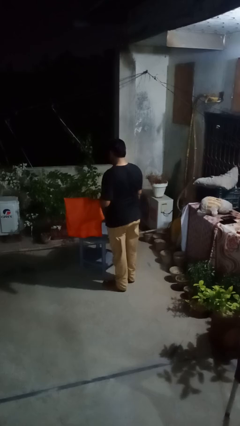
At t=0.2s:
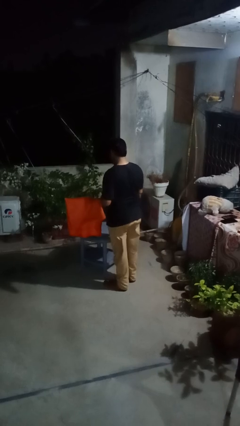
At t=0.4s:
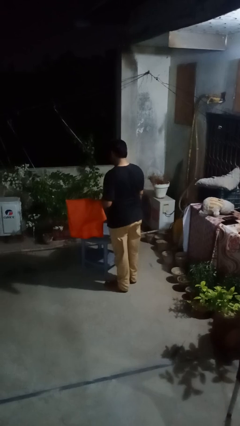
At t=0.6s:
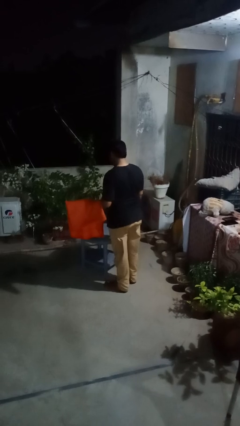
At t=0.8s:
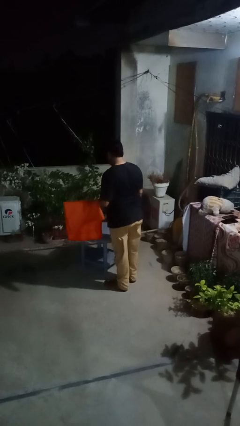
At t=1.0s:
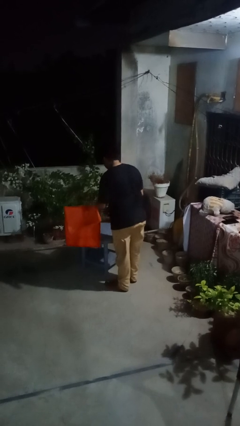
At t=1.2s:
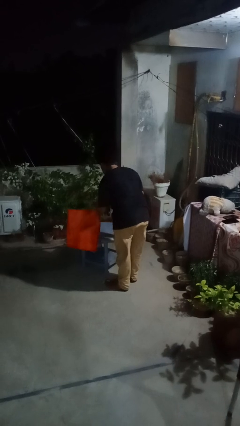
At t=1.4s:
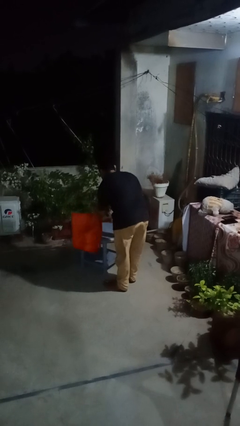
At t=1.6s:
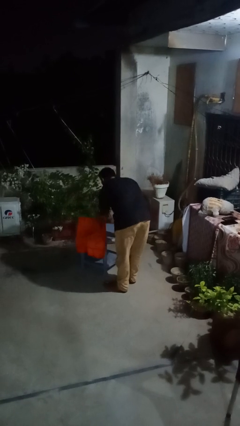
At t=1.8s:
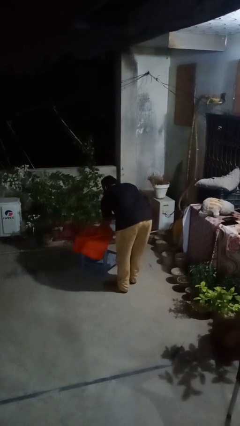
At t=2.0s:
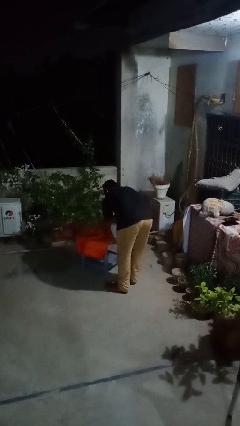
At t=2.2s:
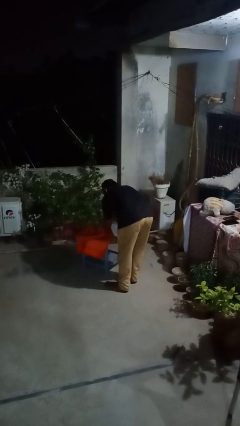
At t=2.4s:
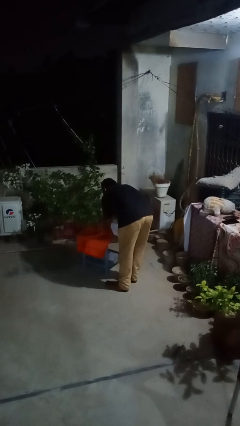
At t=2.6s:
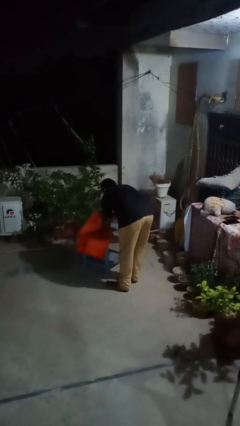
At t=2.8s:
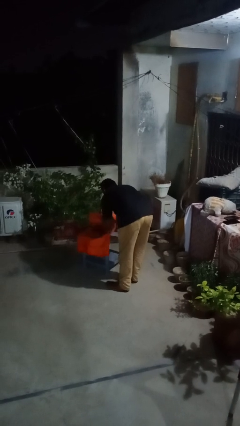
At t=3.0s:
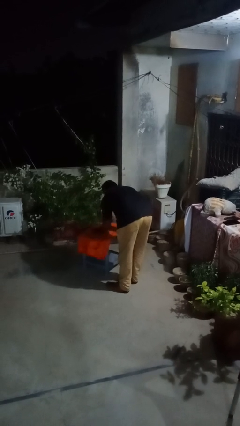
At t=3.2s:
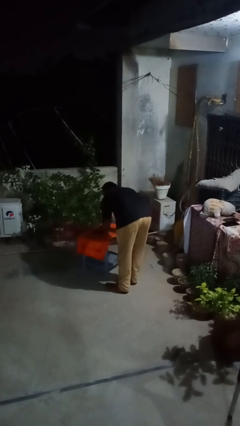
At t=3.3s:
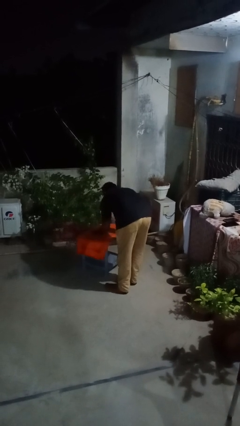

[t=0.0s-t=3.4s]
person spreads tablecloth

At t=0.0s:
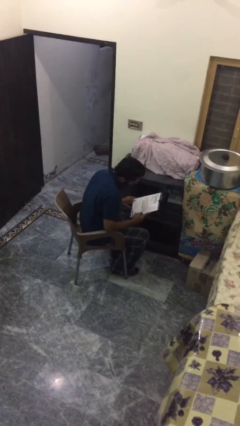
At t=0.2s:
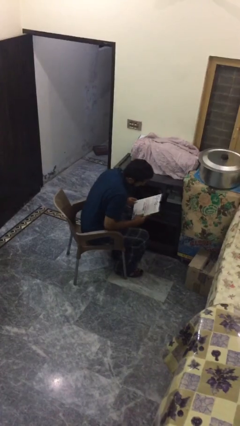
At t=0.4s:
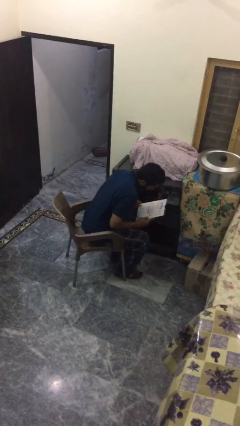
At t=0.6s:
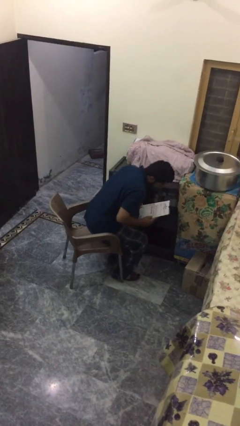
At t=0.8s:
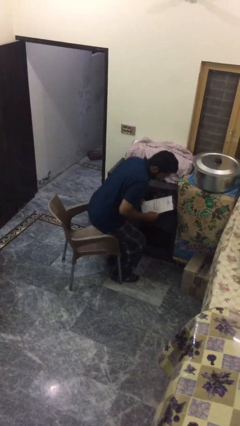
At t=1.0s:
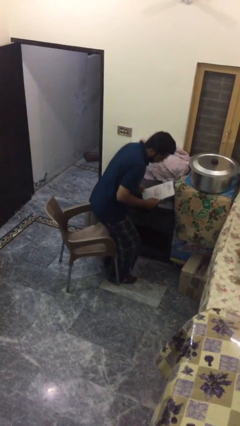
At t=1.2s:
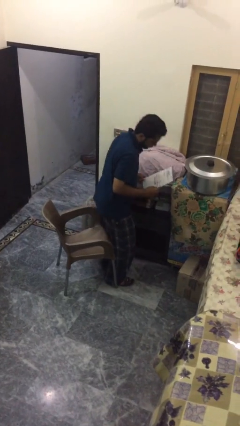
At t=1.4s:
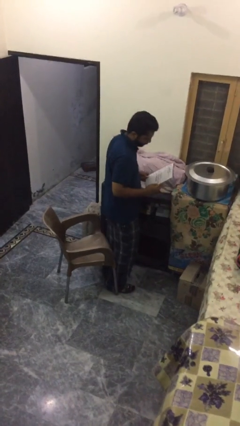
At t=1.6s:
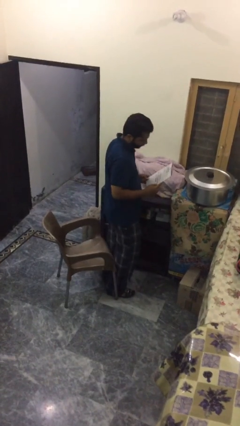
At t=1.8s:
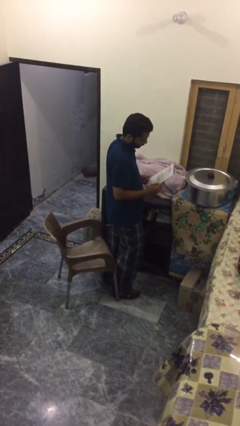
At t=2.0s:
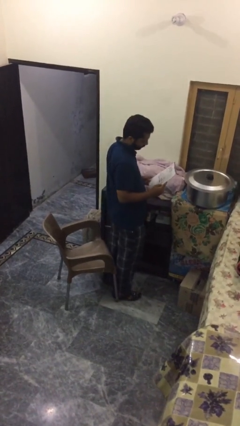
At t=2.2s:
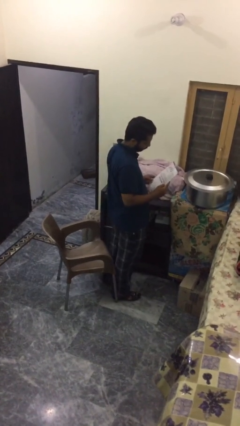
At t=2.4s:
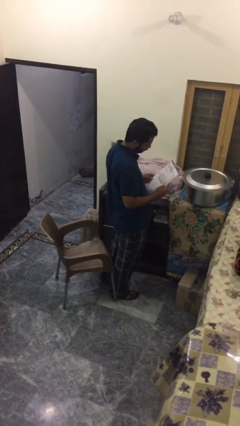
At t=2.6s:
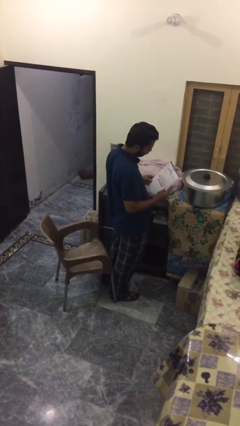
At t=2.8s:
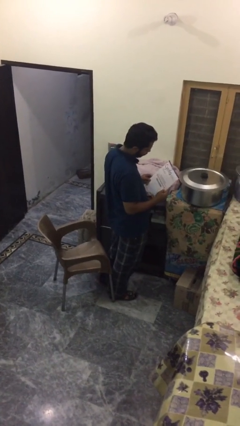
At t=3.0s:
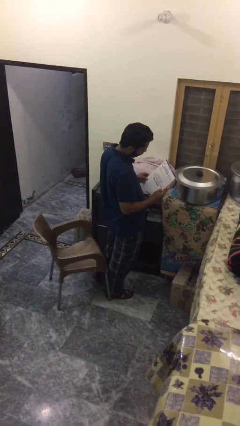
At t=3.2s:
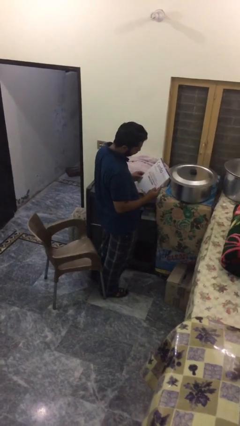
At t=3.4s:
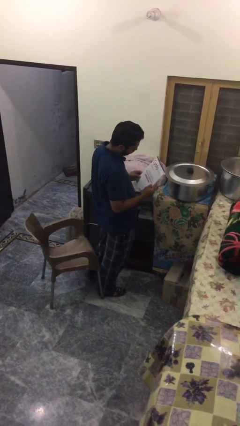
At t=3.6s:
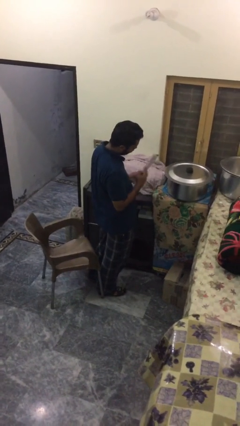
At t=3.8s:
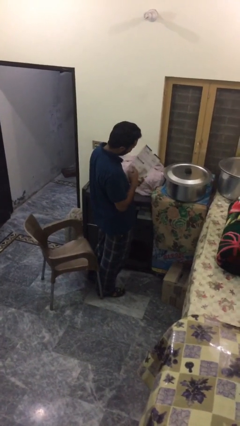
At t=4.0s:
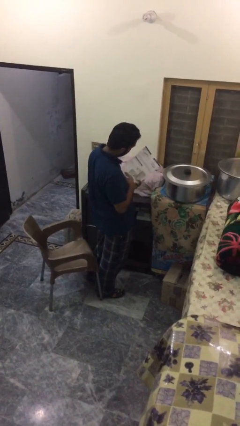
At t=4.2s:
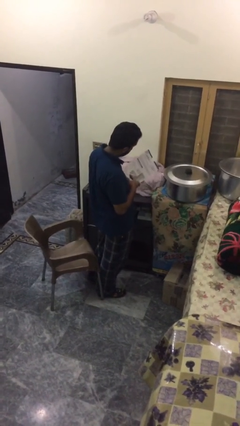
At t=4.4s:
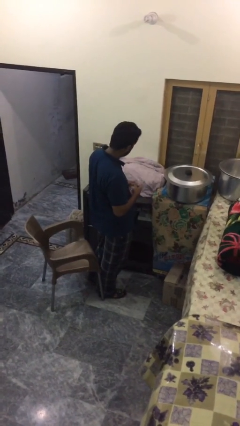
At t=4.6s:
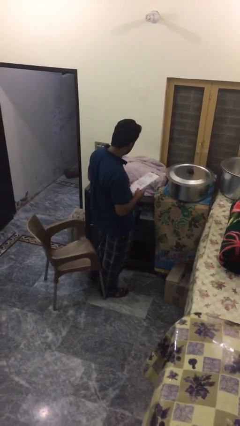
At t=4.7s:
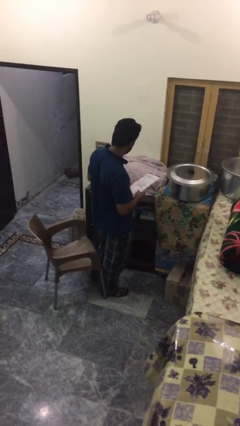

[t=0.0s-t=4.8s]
person stands up

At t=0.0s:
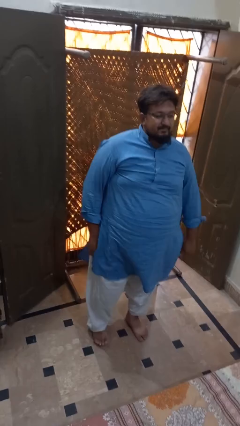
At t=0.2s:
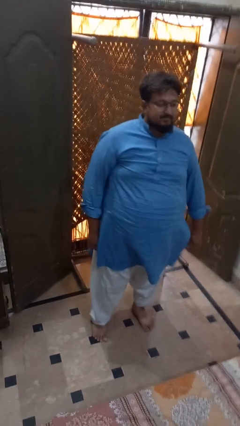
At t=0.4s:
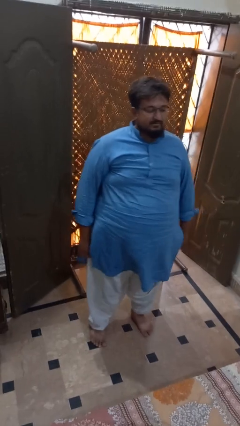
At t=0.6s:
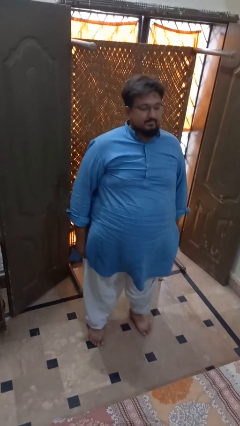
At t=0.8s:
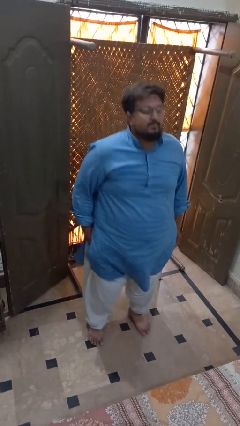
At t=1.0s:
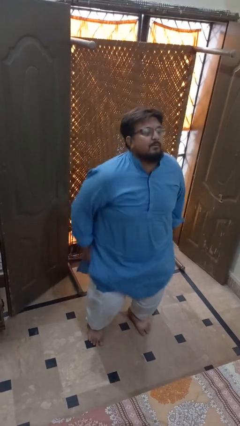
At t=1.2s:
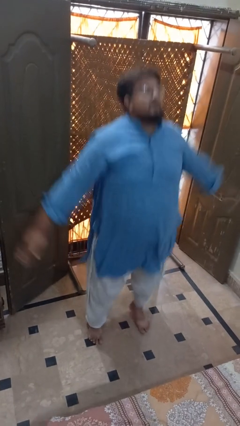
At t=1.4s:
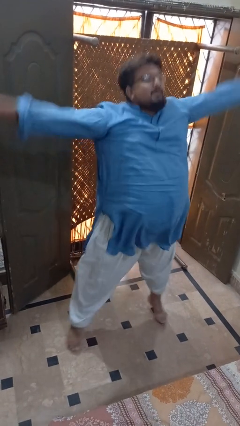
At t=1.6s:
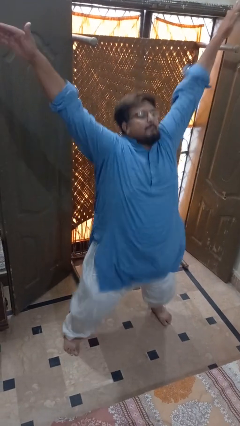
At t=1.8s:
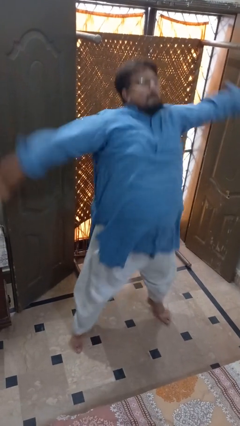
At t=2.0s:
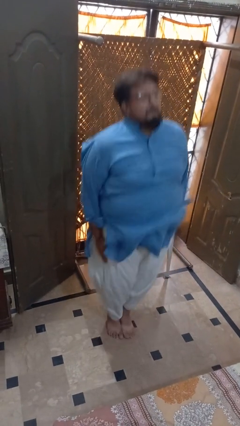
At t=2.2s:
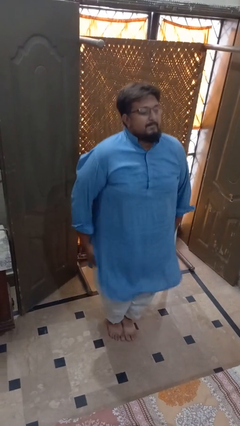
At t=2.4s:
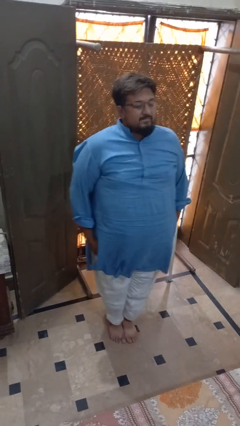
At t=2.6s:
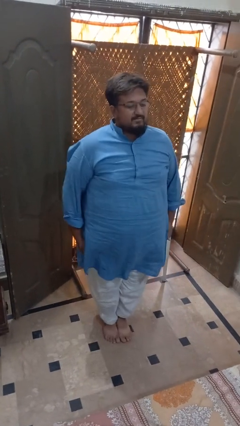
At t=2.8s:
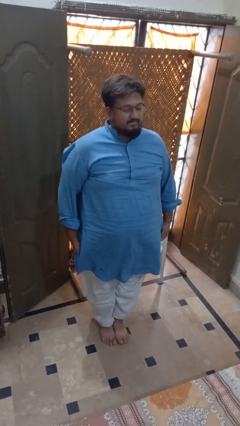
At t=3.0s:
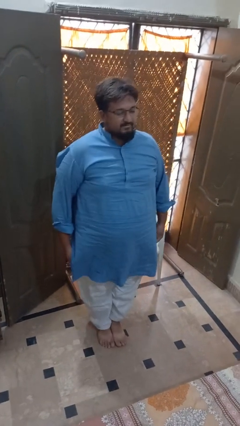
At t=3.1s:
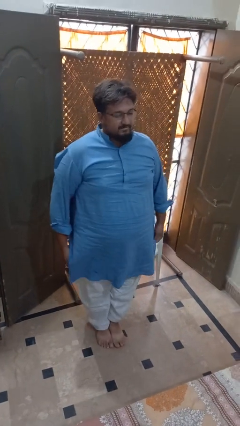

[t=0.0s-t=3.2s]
person exercises with jumping jacks

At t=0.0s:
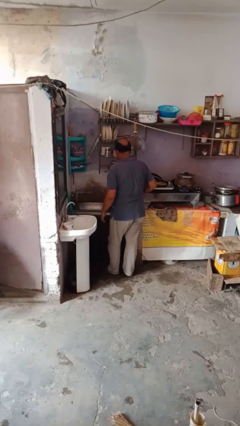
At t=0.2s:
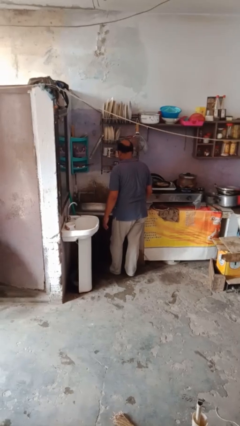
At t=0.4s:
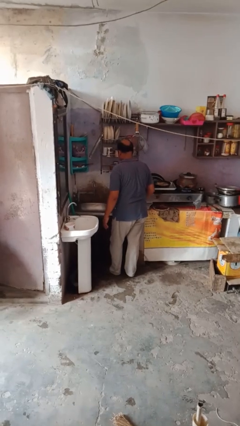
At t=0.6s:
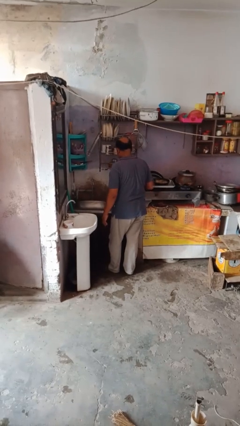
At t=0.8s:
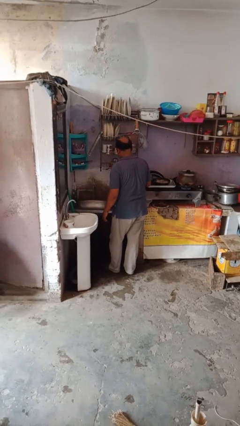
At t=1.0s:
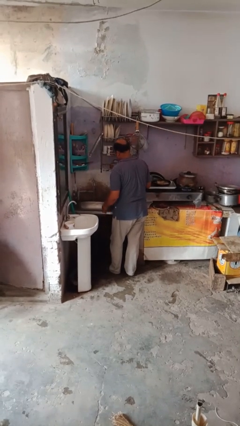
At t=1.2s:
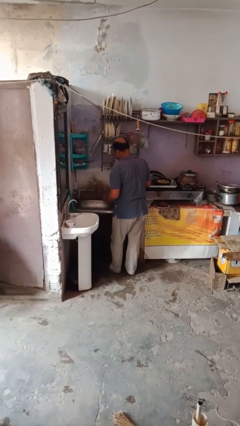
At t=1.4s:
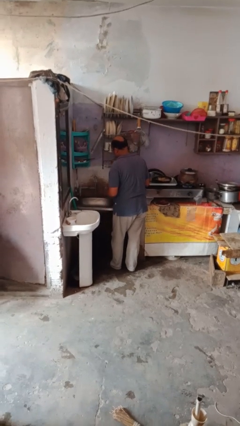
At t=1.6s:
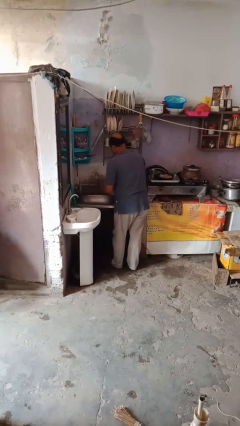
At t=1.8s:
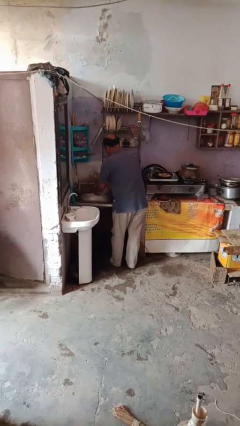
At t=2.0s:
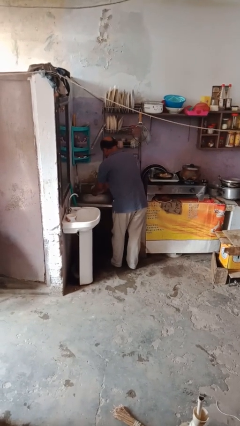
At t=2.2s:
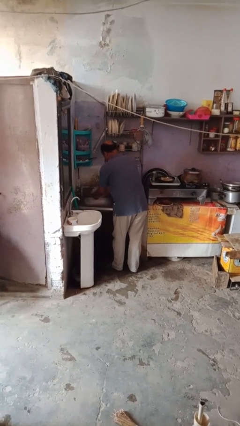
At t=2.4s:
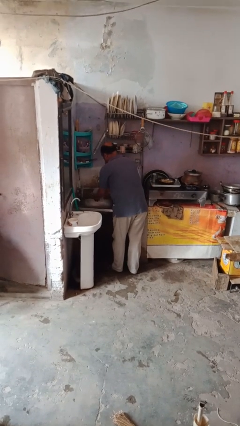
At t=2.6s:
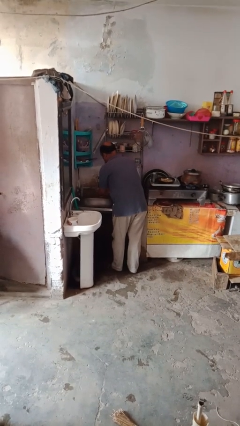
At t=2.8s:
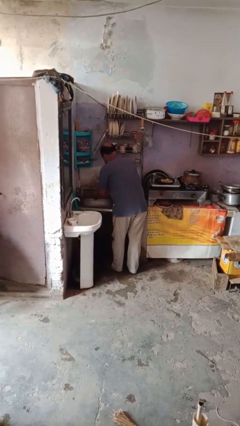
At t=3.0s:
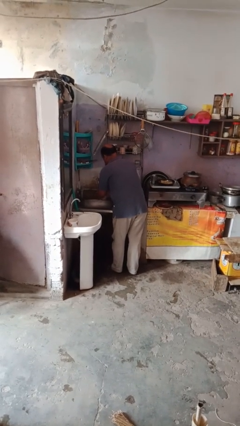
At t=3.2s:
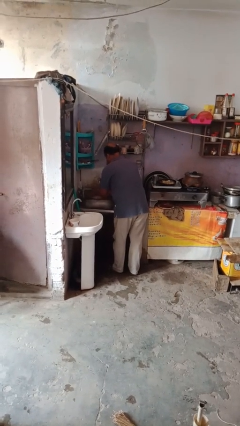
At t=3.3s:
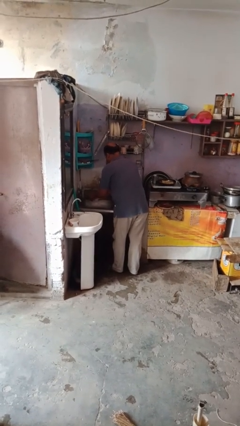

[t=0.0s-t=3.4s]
person washes dish

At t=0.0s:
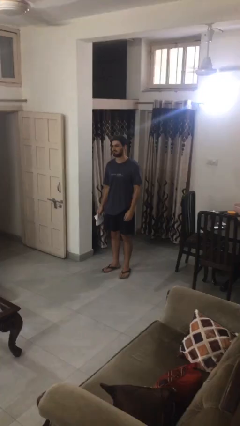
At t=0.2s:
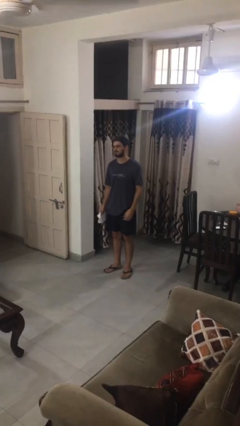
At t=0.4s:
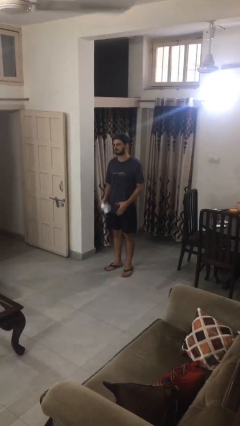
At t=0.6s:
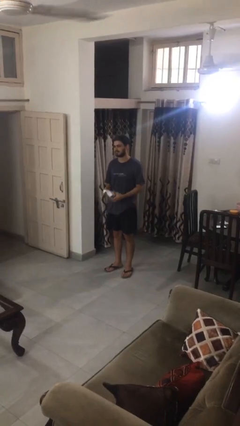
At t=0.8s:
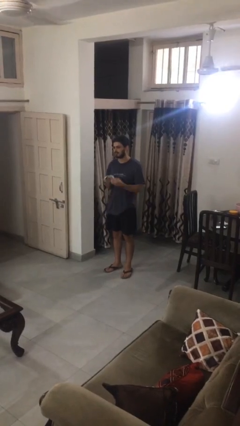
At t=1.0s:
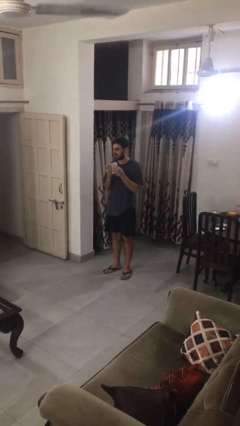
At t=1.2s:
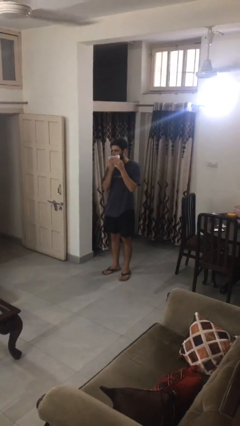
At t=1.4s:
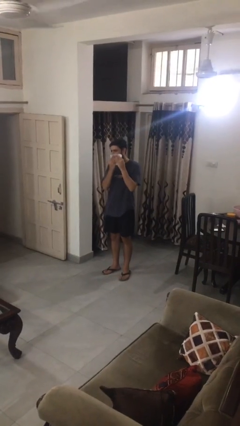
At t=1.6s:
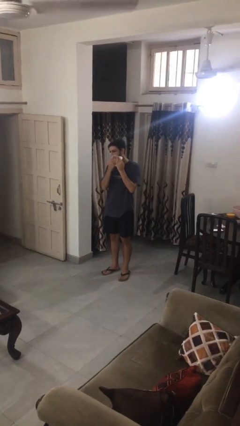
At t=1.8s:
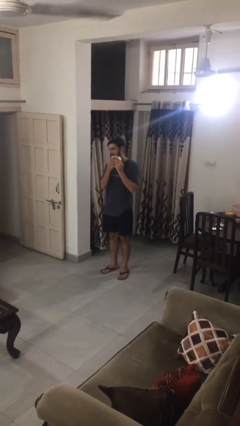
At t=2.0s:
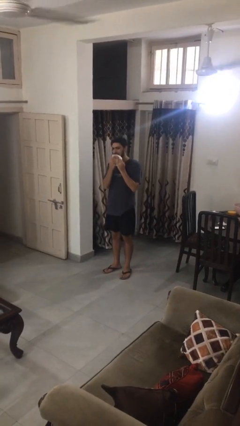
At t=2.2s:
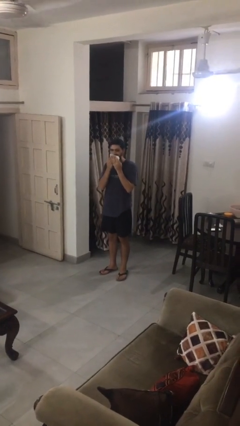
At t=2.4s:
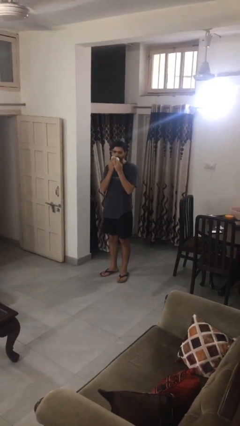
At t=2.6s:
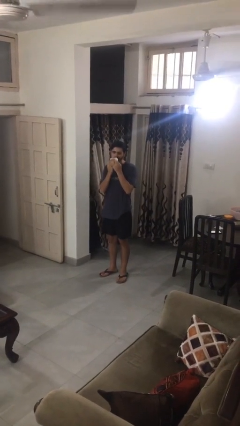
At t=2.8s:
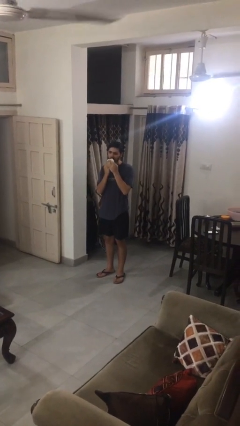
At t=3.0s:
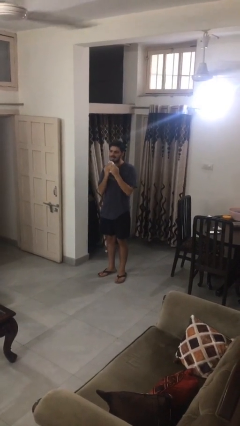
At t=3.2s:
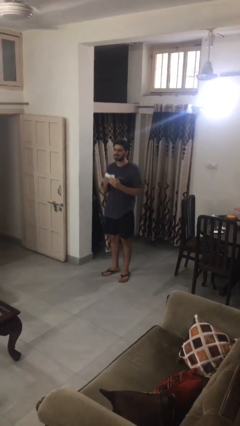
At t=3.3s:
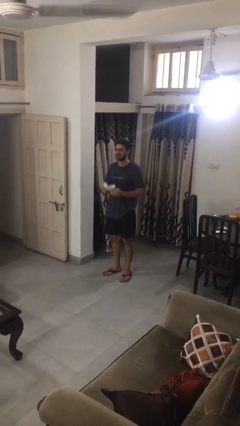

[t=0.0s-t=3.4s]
person wipes mouth with napkin
